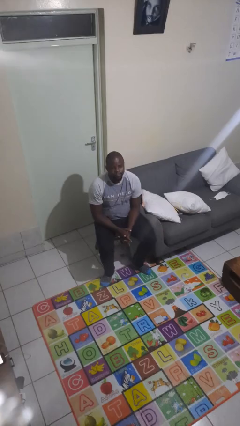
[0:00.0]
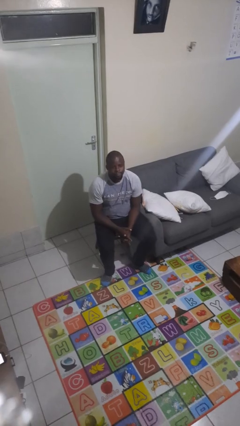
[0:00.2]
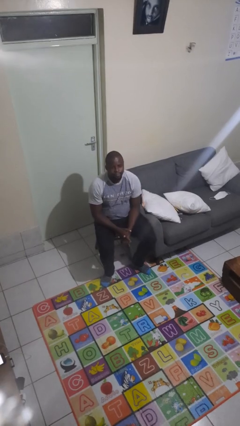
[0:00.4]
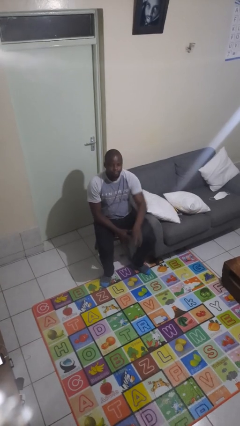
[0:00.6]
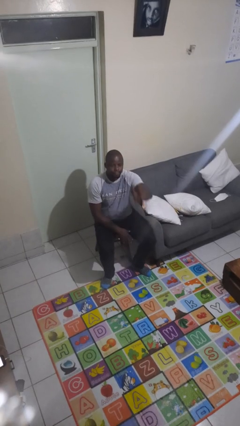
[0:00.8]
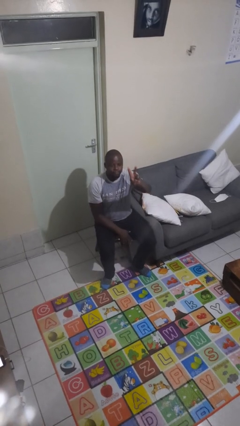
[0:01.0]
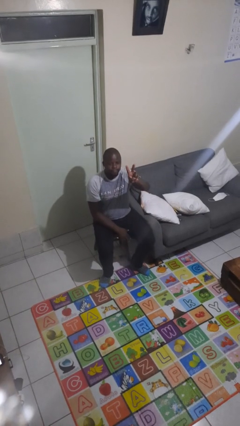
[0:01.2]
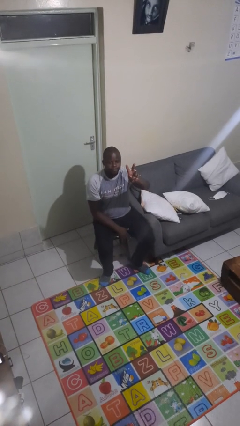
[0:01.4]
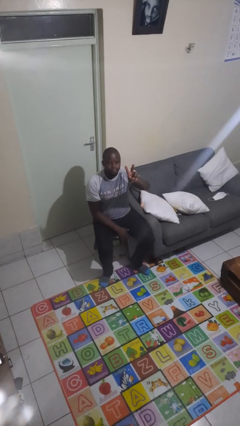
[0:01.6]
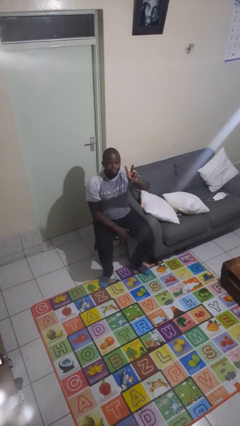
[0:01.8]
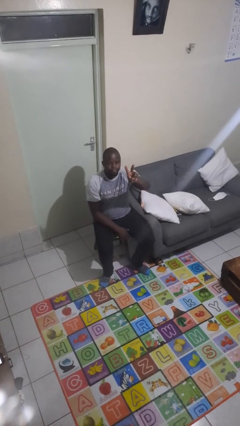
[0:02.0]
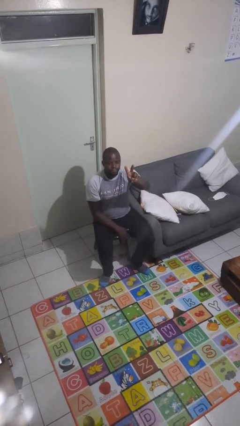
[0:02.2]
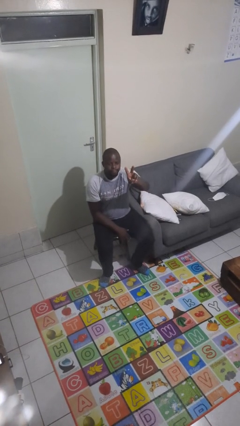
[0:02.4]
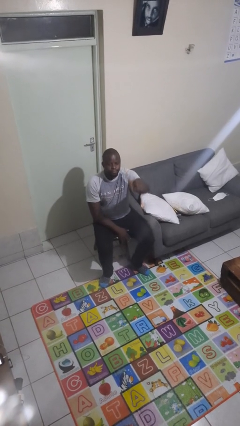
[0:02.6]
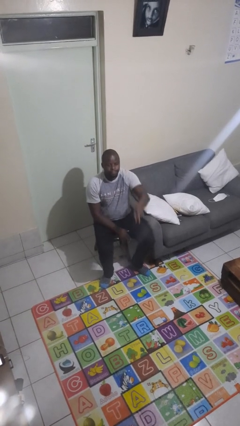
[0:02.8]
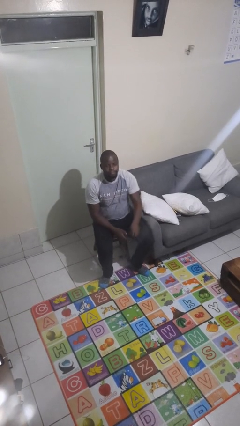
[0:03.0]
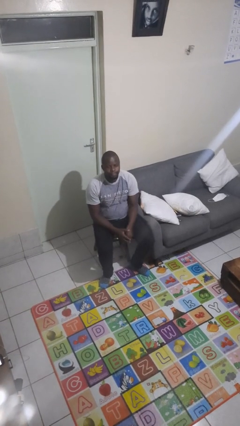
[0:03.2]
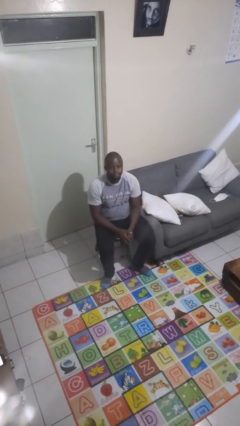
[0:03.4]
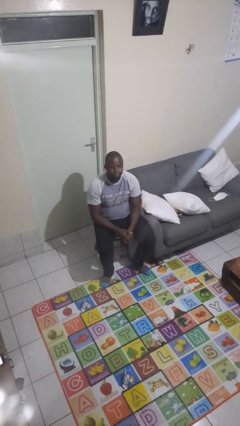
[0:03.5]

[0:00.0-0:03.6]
person gestures peace

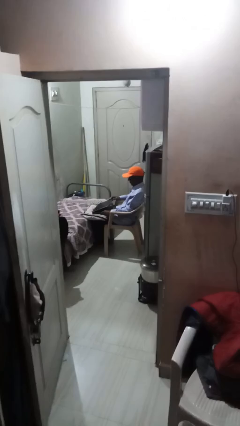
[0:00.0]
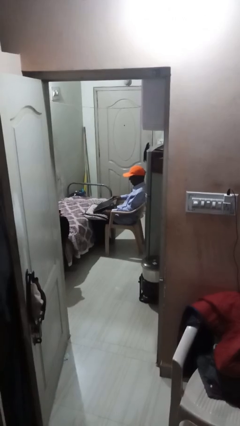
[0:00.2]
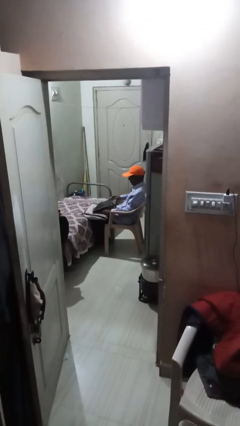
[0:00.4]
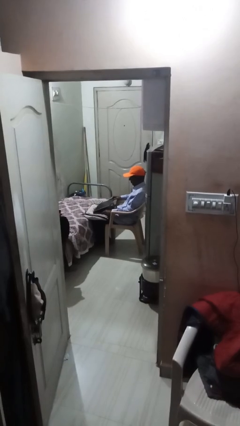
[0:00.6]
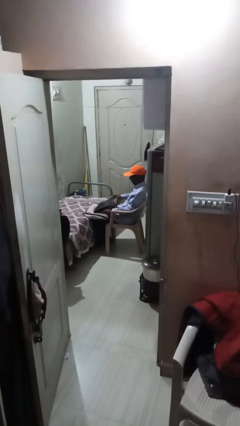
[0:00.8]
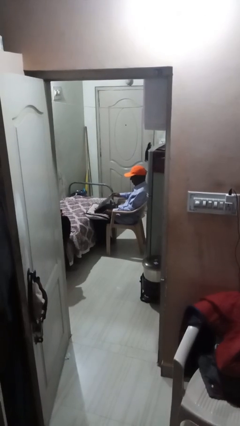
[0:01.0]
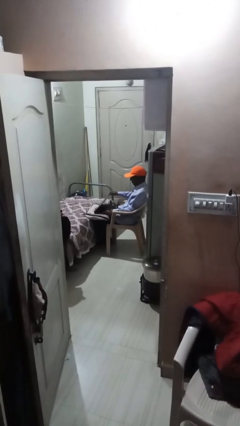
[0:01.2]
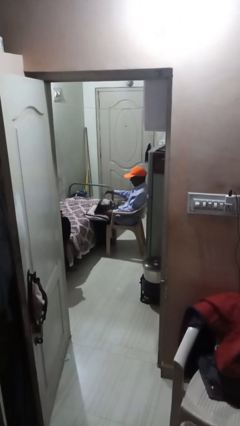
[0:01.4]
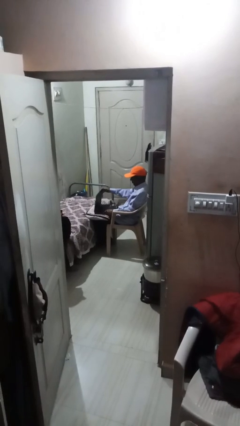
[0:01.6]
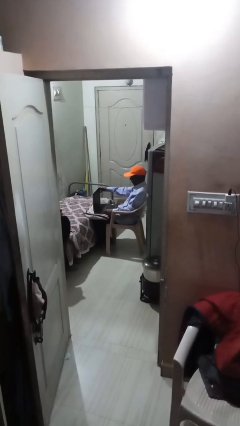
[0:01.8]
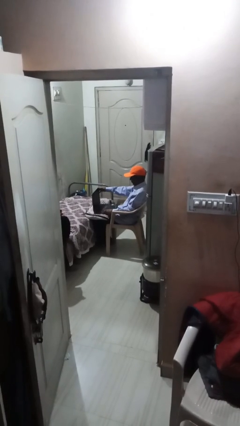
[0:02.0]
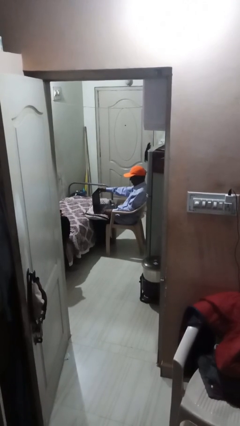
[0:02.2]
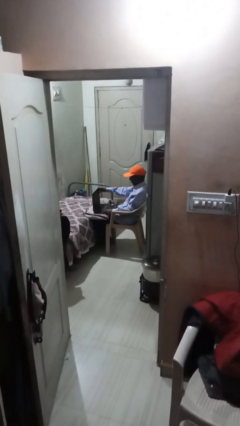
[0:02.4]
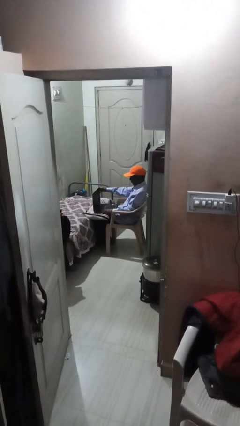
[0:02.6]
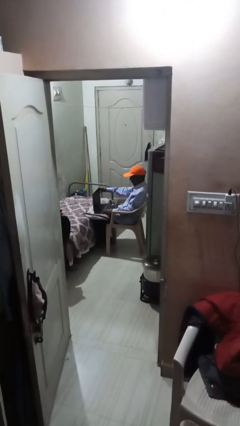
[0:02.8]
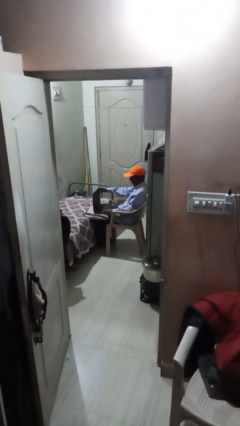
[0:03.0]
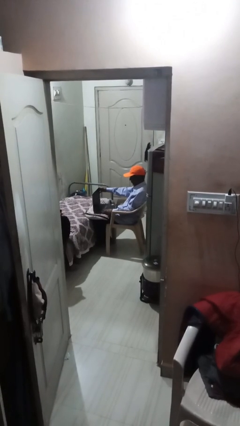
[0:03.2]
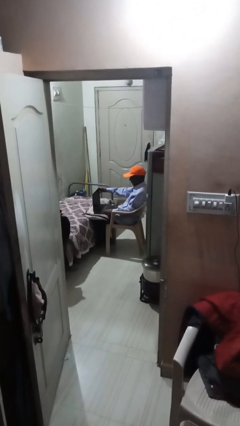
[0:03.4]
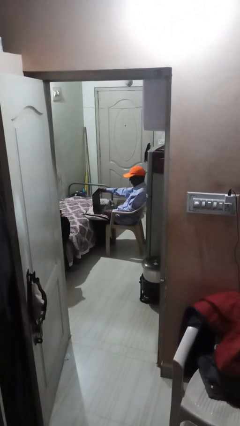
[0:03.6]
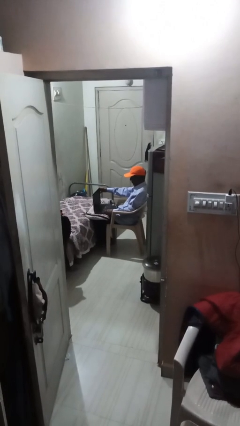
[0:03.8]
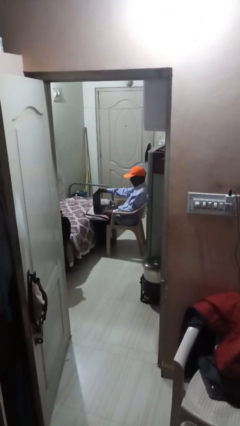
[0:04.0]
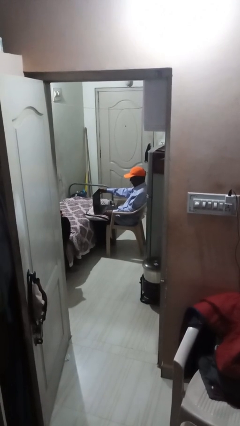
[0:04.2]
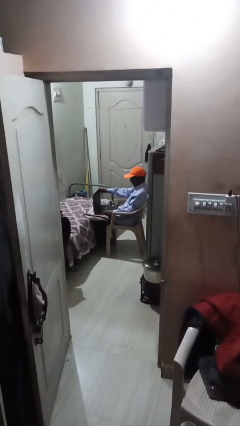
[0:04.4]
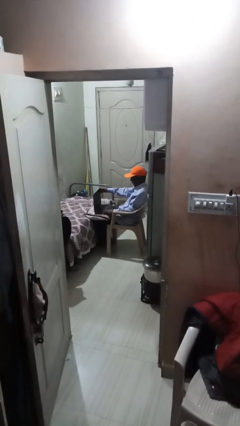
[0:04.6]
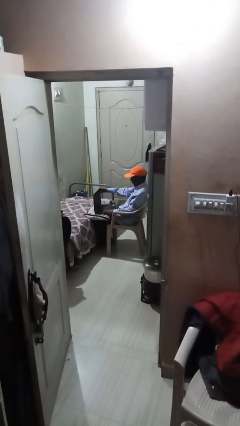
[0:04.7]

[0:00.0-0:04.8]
person interacts with laptop

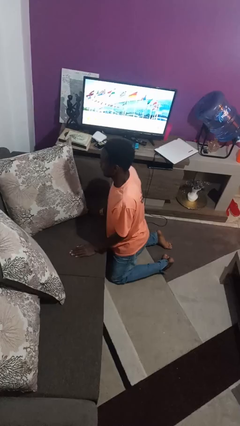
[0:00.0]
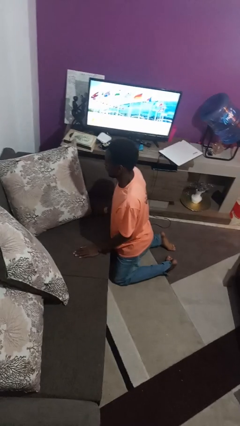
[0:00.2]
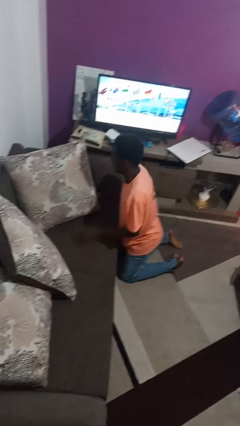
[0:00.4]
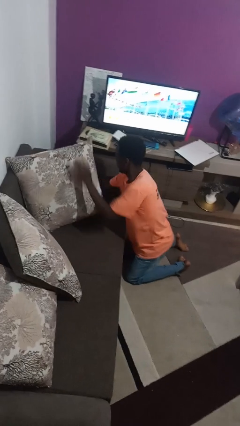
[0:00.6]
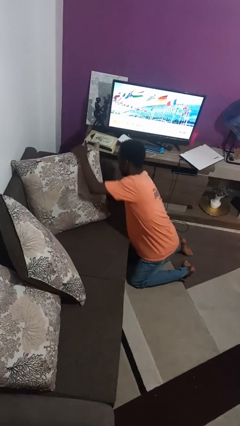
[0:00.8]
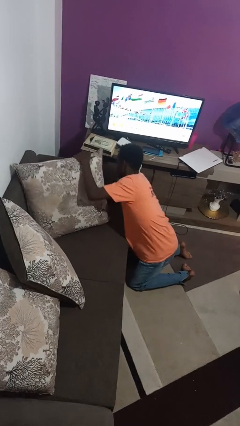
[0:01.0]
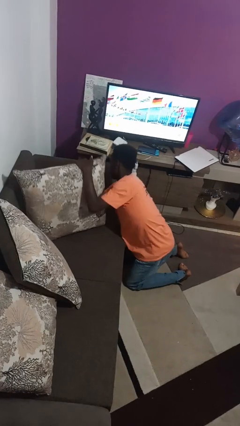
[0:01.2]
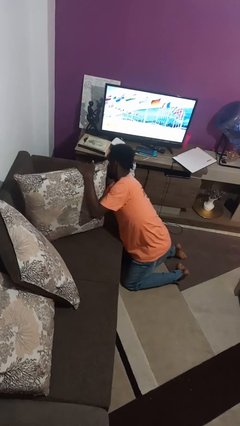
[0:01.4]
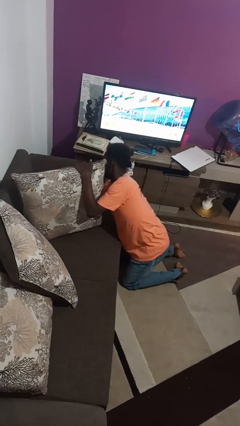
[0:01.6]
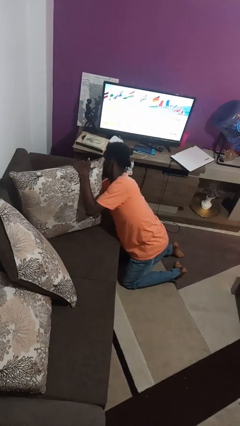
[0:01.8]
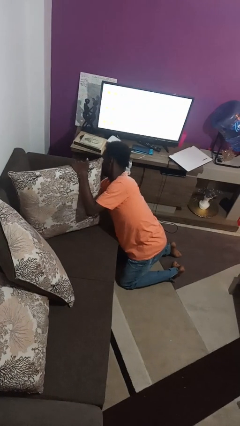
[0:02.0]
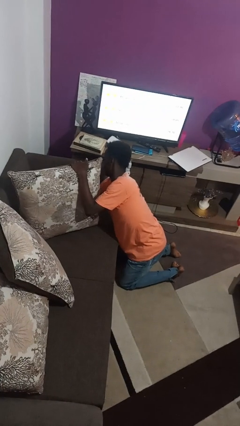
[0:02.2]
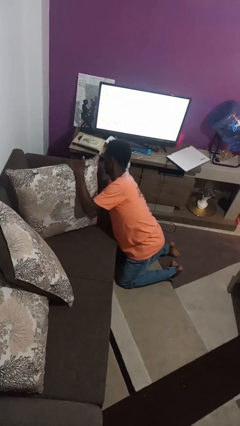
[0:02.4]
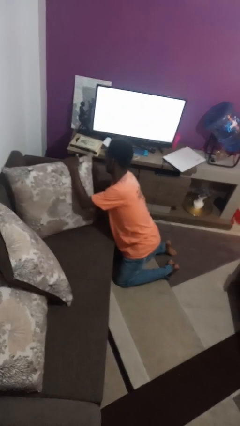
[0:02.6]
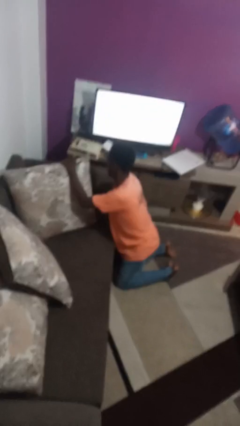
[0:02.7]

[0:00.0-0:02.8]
person searches in couch

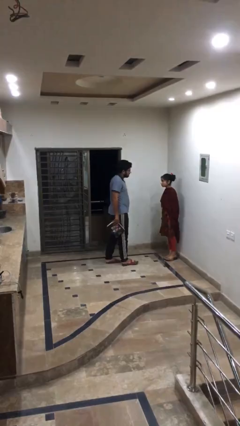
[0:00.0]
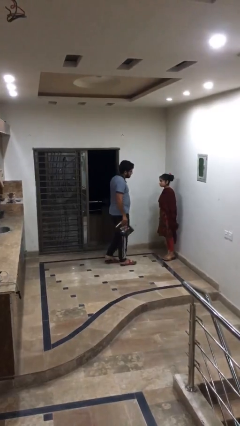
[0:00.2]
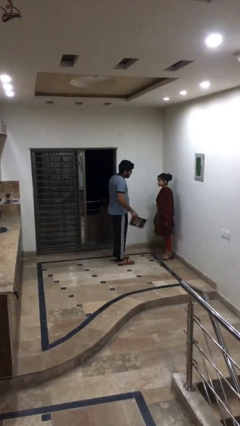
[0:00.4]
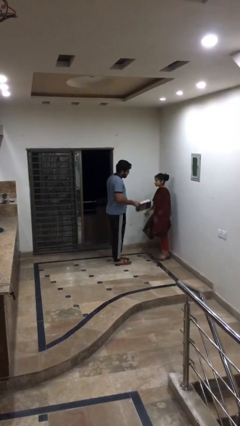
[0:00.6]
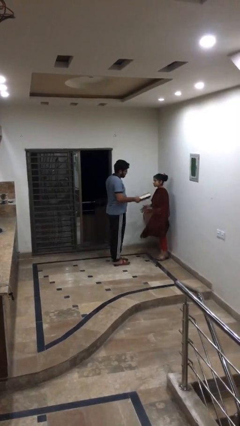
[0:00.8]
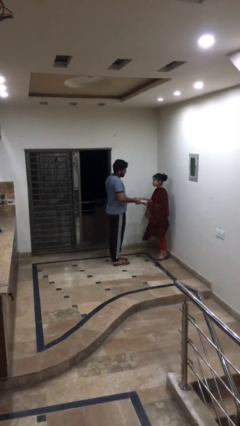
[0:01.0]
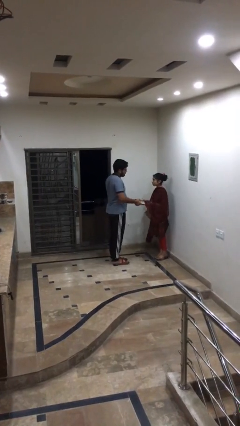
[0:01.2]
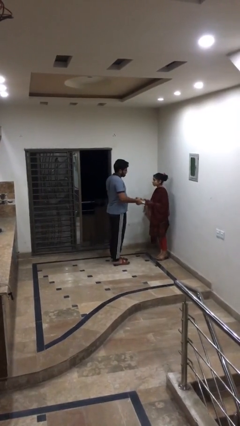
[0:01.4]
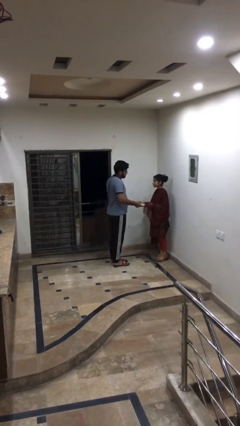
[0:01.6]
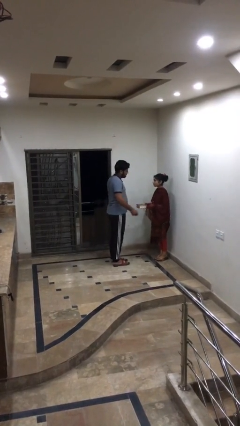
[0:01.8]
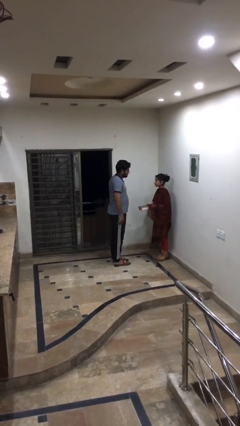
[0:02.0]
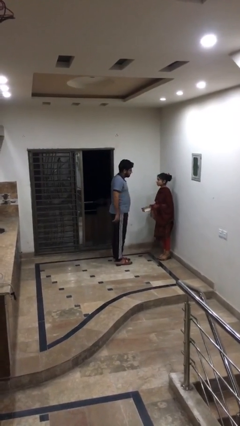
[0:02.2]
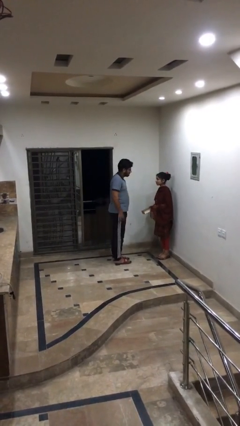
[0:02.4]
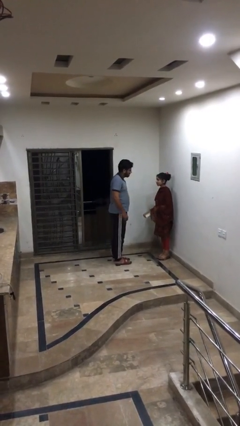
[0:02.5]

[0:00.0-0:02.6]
person transfers object to person

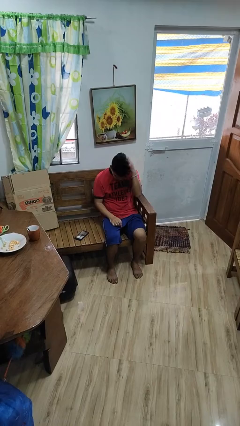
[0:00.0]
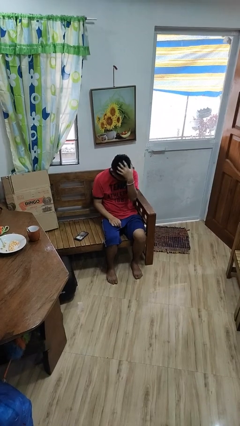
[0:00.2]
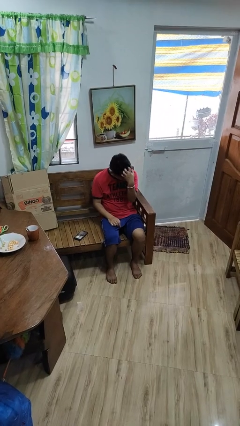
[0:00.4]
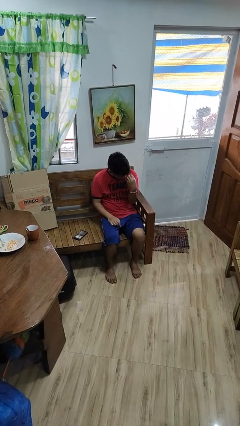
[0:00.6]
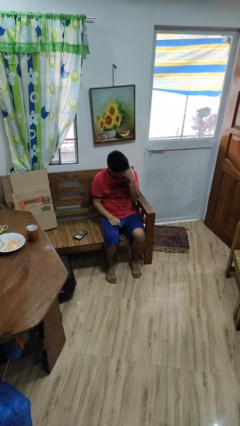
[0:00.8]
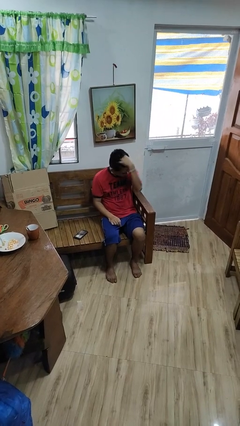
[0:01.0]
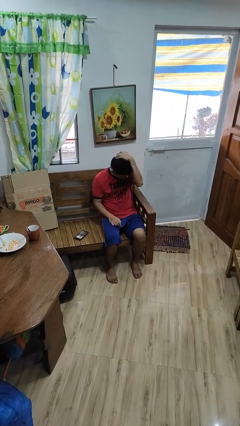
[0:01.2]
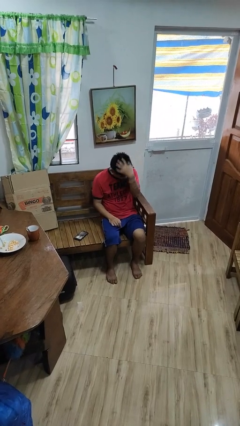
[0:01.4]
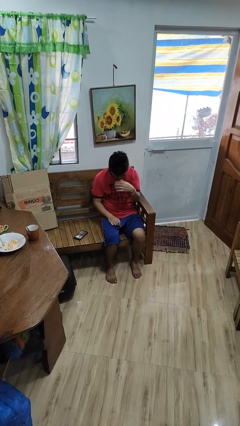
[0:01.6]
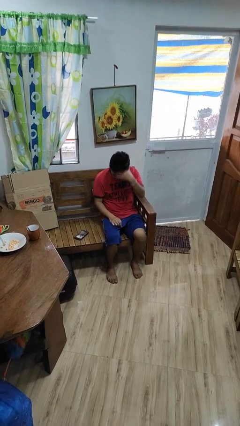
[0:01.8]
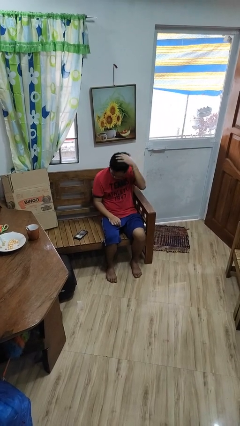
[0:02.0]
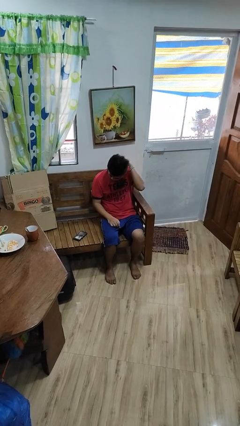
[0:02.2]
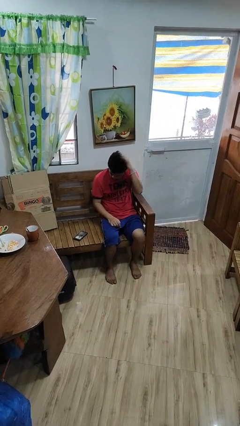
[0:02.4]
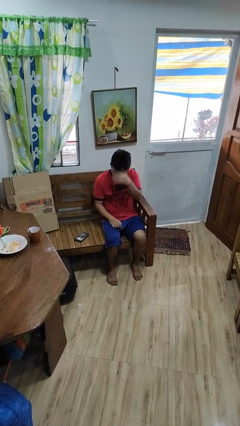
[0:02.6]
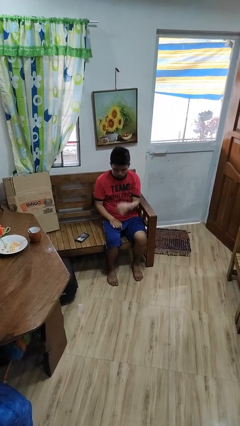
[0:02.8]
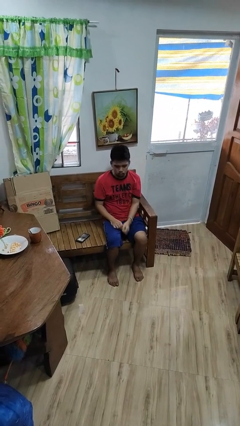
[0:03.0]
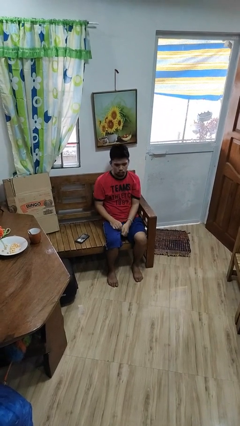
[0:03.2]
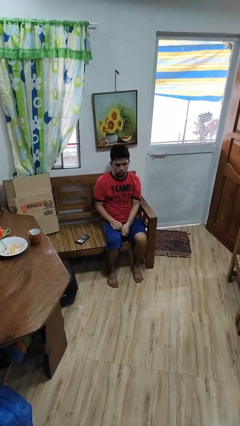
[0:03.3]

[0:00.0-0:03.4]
person strokes hair

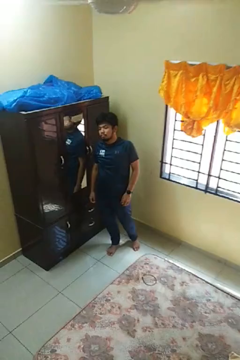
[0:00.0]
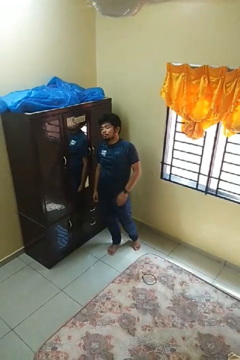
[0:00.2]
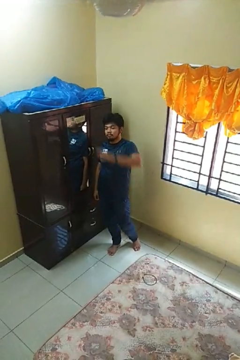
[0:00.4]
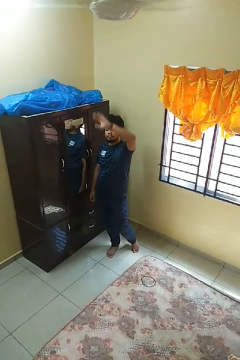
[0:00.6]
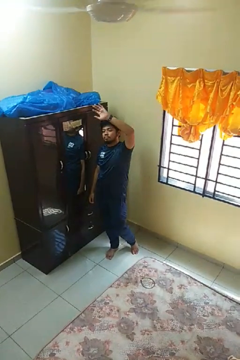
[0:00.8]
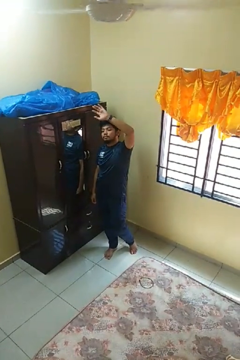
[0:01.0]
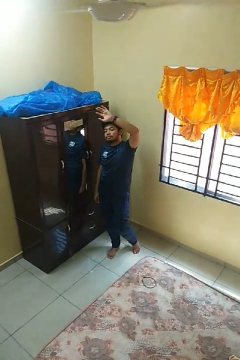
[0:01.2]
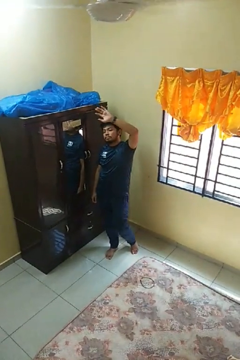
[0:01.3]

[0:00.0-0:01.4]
person gestures raise hand
